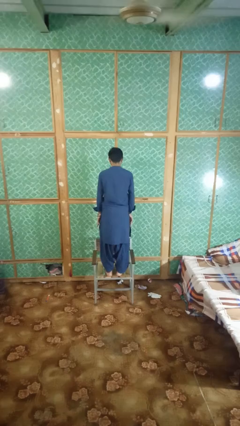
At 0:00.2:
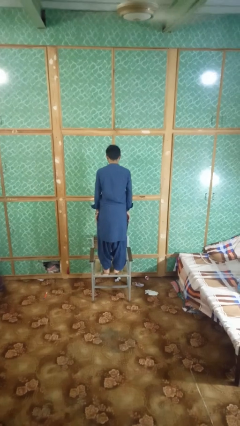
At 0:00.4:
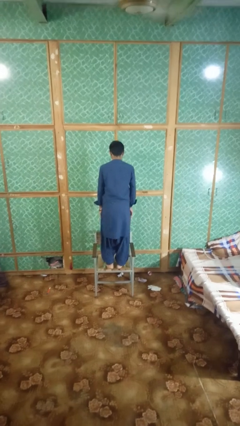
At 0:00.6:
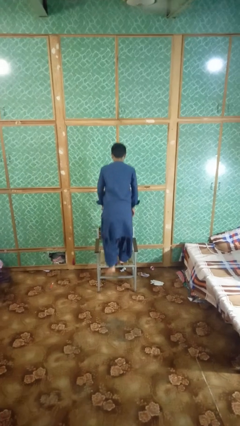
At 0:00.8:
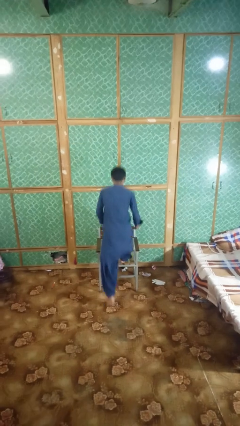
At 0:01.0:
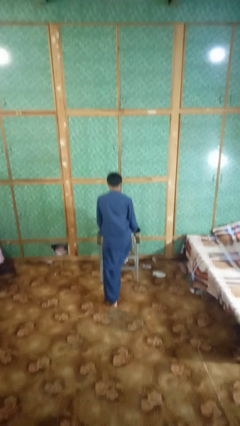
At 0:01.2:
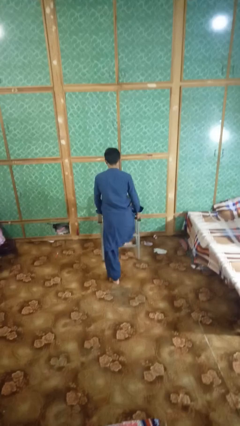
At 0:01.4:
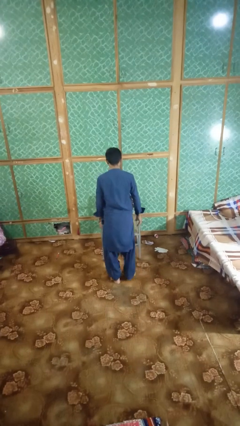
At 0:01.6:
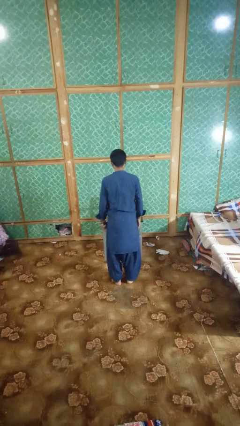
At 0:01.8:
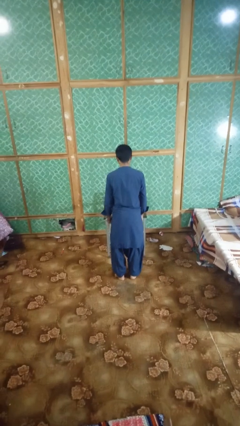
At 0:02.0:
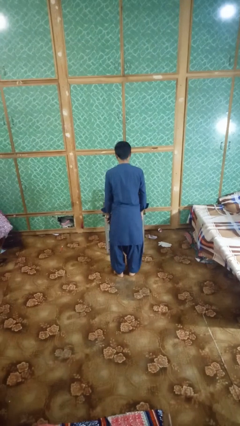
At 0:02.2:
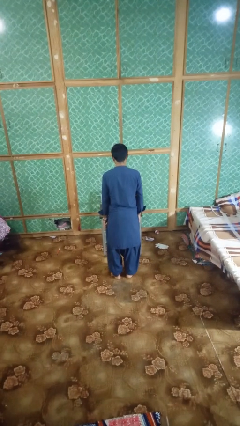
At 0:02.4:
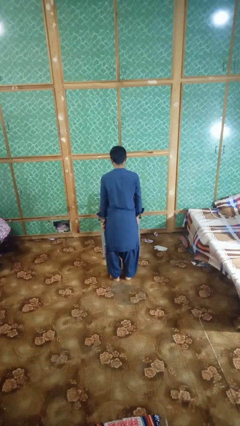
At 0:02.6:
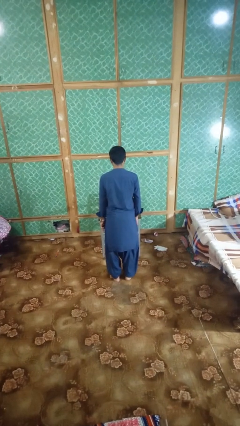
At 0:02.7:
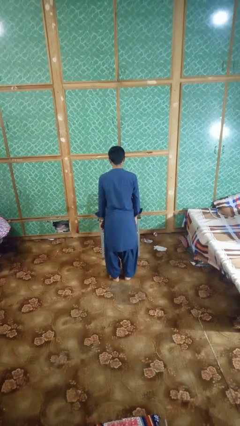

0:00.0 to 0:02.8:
person climbs off chair

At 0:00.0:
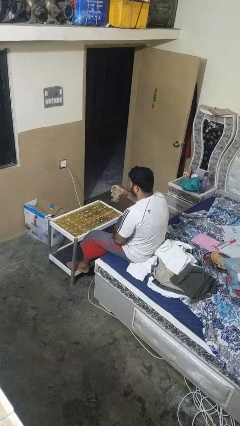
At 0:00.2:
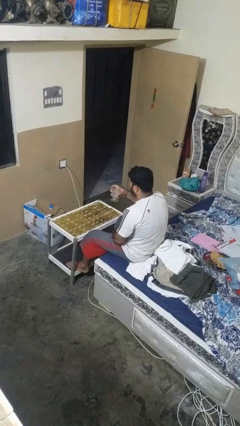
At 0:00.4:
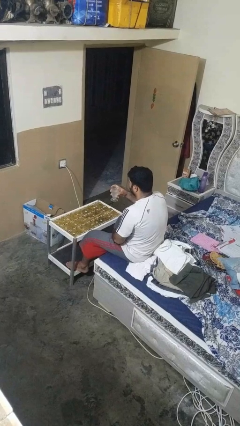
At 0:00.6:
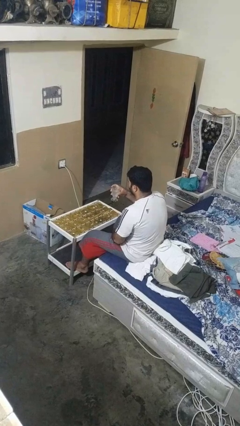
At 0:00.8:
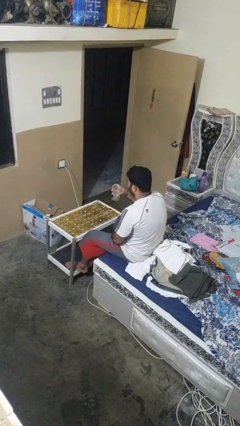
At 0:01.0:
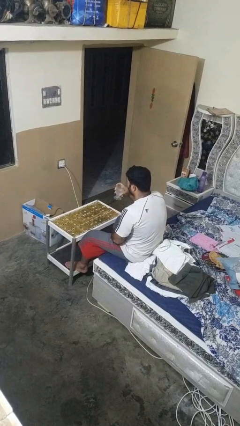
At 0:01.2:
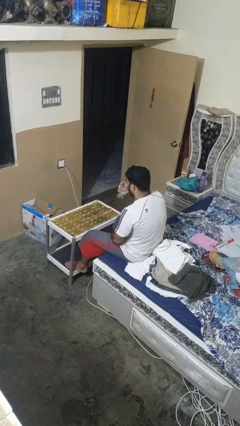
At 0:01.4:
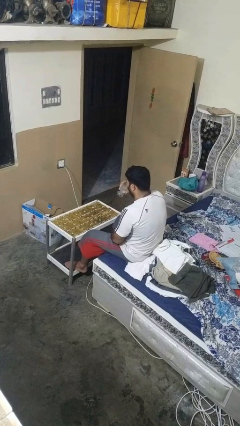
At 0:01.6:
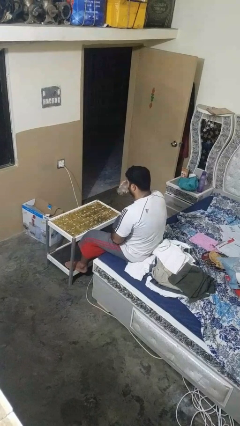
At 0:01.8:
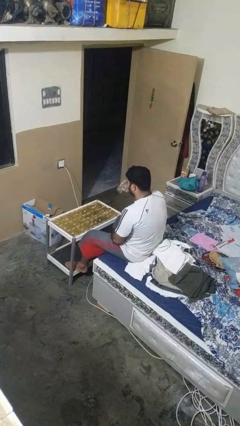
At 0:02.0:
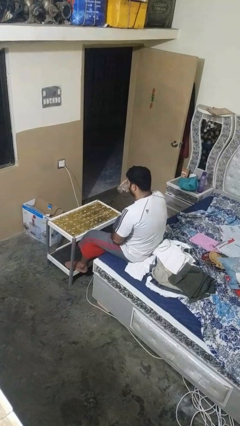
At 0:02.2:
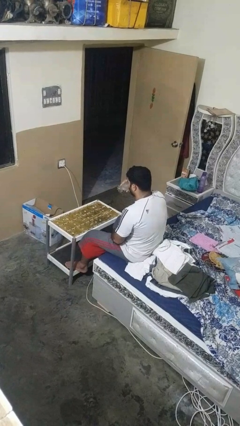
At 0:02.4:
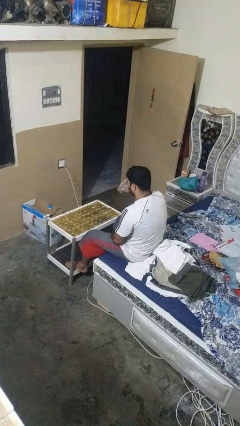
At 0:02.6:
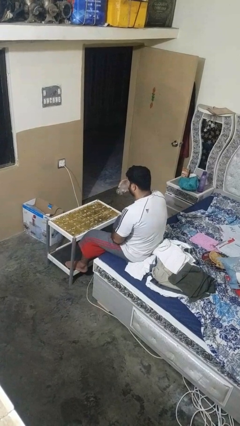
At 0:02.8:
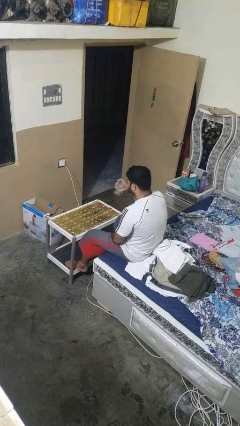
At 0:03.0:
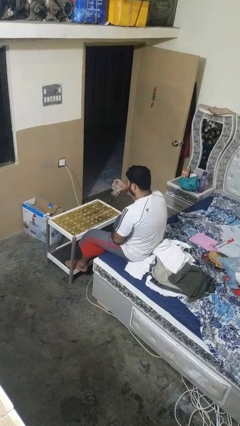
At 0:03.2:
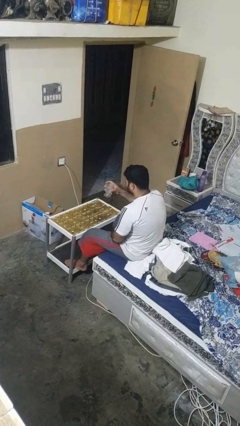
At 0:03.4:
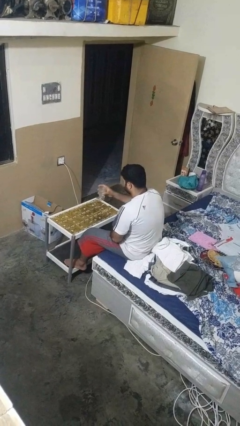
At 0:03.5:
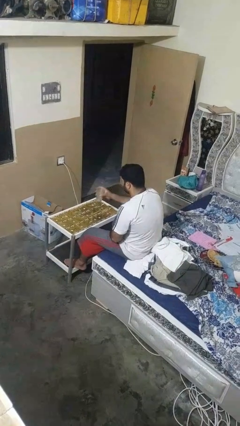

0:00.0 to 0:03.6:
person drinks from shotglass

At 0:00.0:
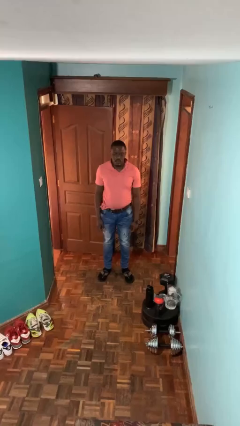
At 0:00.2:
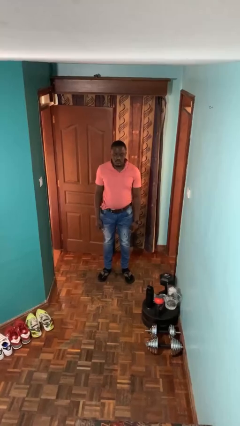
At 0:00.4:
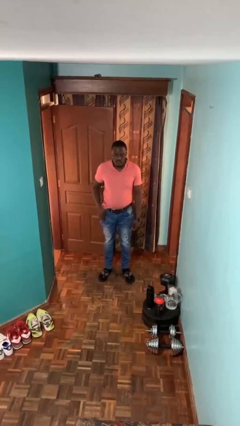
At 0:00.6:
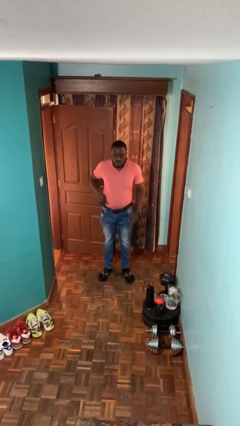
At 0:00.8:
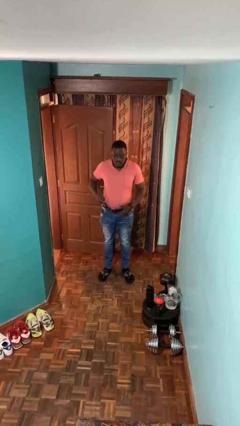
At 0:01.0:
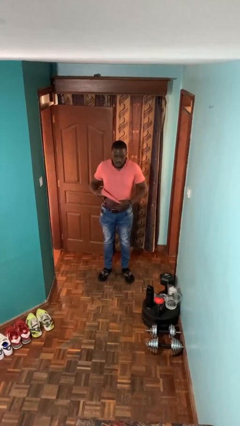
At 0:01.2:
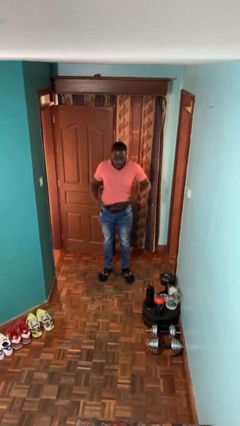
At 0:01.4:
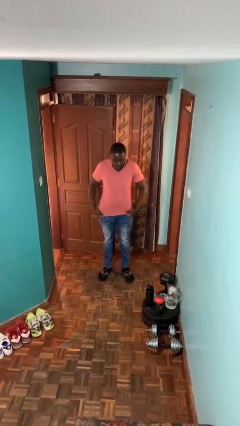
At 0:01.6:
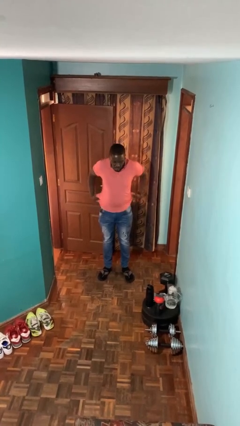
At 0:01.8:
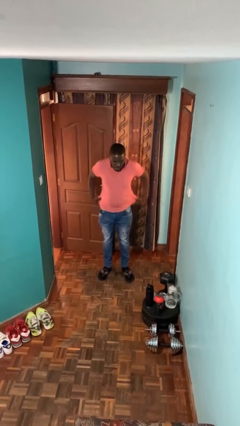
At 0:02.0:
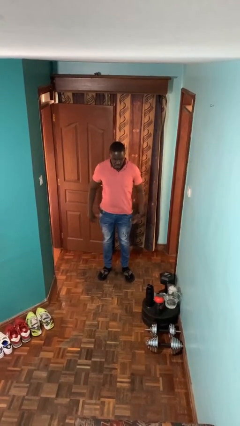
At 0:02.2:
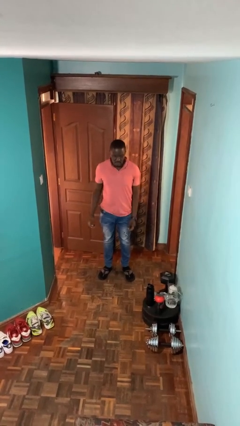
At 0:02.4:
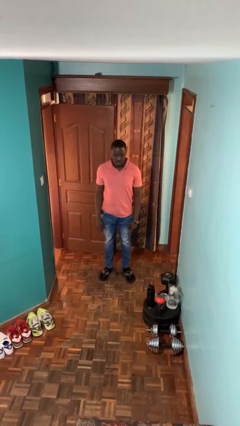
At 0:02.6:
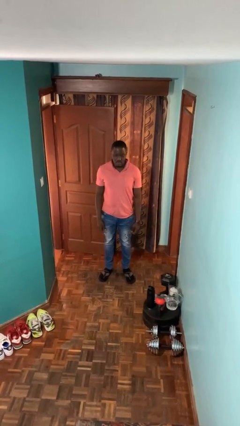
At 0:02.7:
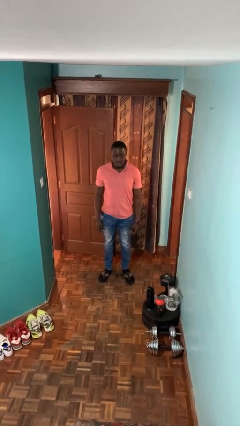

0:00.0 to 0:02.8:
person untucks shirt

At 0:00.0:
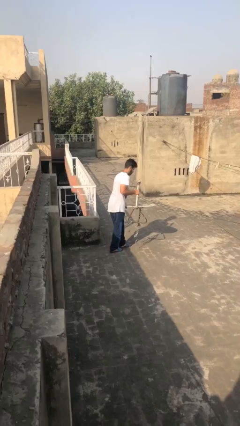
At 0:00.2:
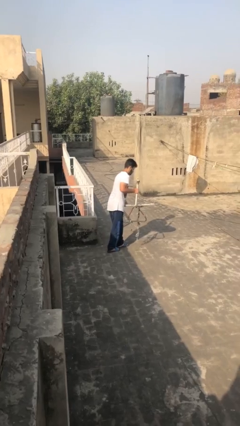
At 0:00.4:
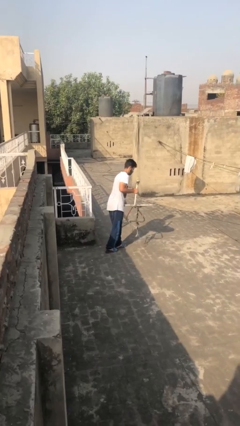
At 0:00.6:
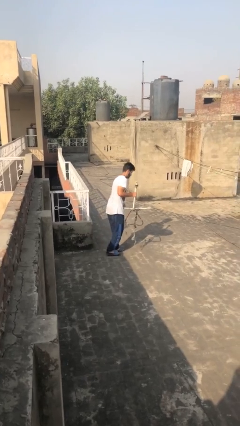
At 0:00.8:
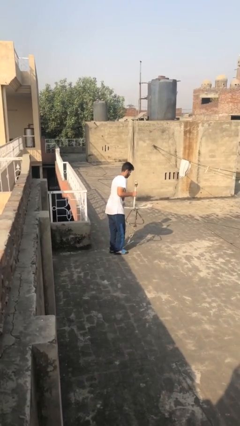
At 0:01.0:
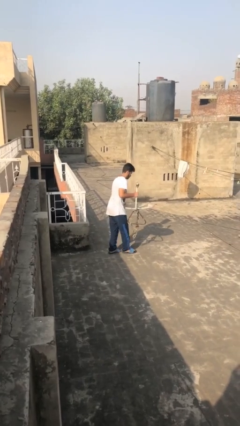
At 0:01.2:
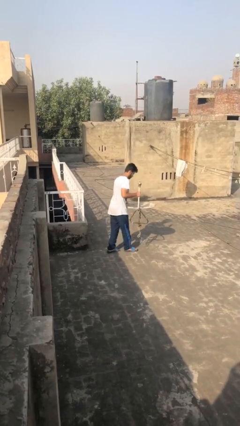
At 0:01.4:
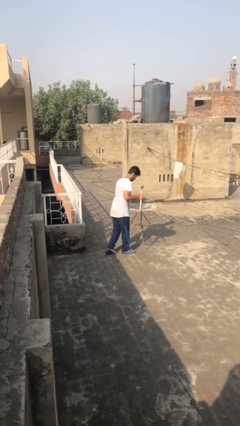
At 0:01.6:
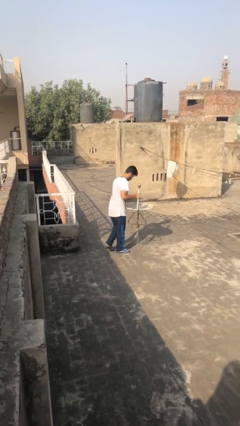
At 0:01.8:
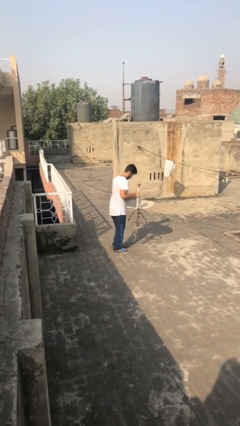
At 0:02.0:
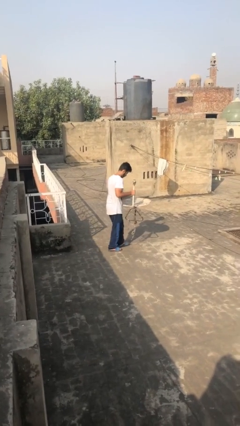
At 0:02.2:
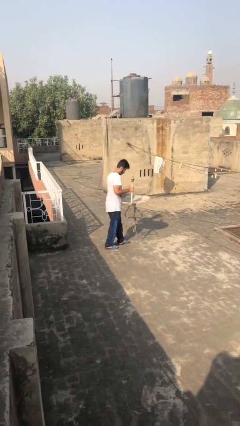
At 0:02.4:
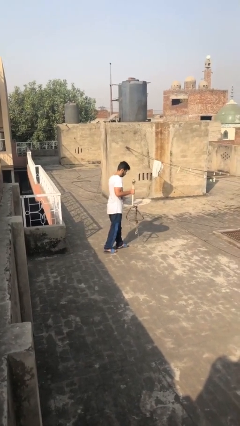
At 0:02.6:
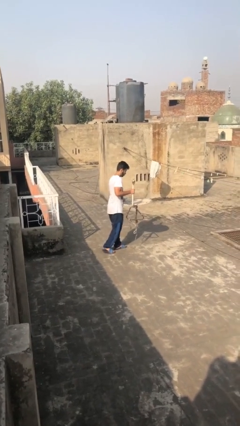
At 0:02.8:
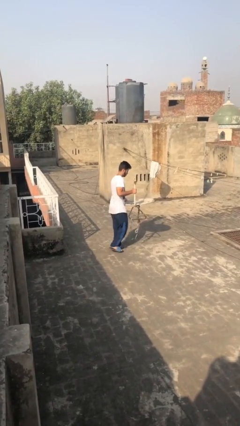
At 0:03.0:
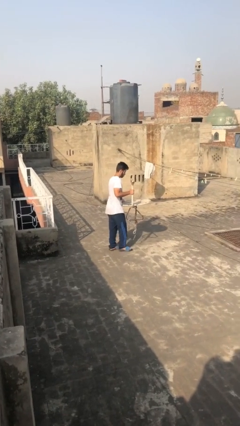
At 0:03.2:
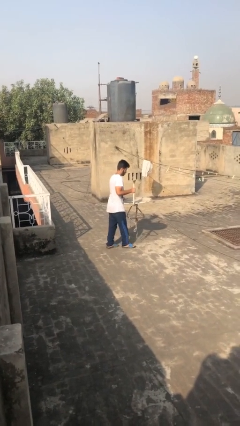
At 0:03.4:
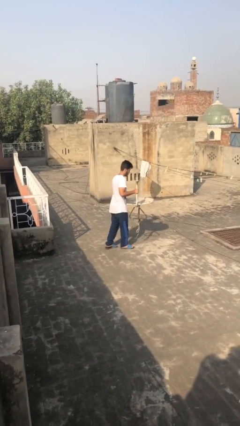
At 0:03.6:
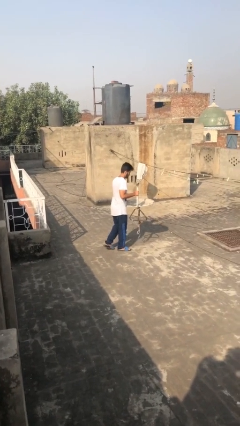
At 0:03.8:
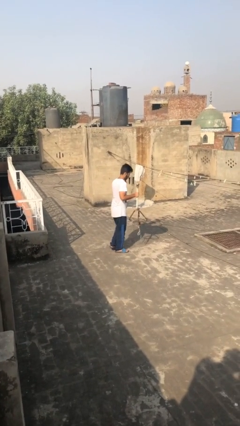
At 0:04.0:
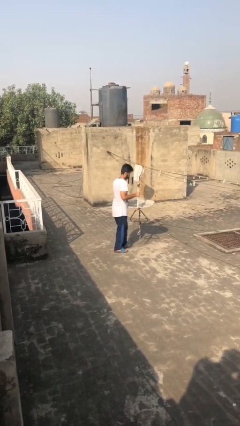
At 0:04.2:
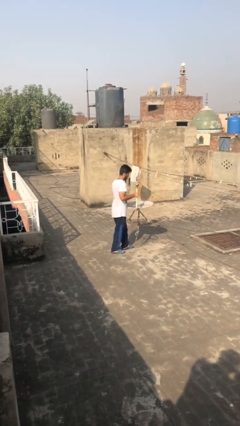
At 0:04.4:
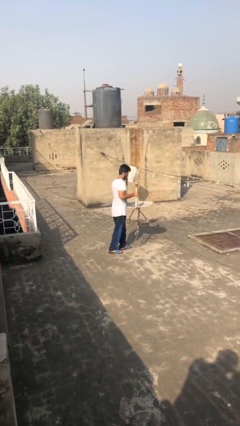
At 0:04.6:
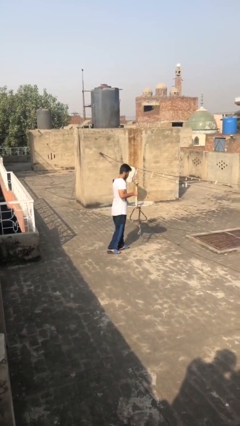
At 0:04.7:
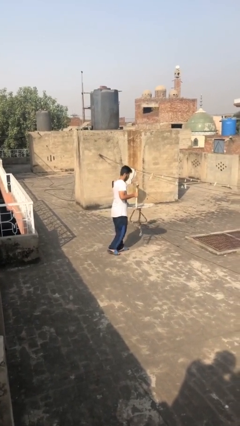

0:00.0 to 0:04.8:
person carries heavy object

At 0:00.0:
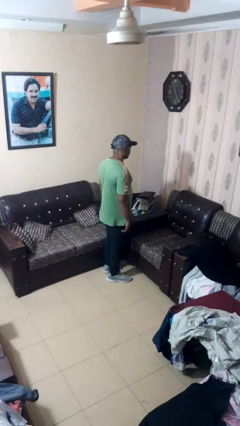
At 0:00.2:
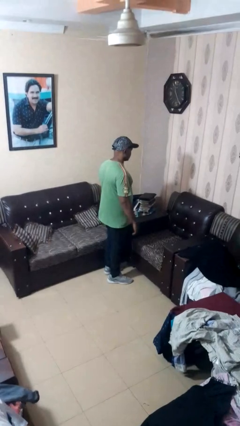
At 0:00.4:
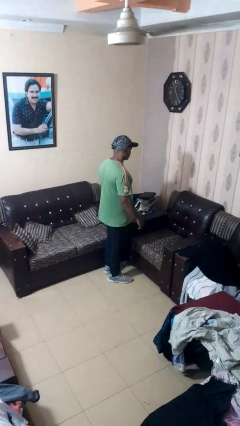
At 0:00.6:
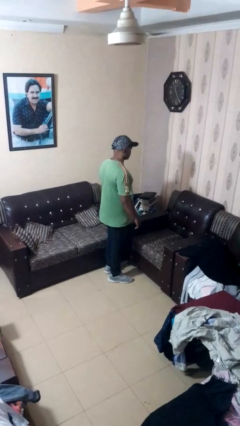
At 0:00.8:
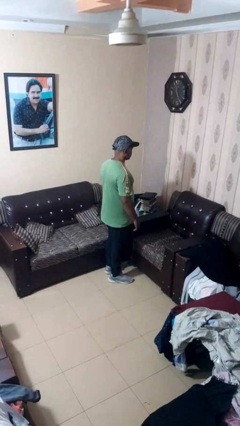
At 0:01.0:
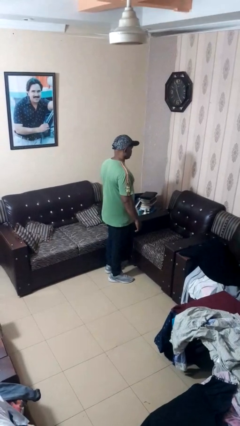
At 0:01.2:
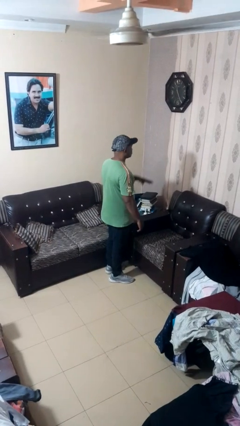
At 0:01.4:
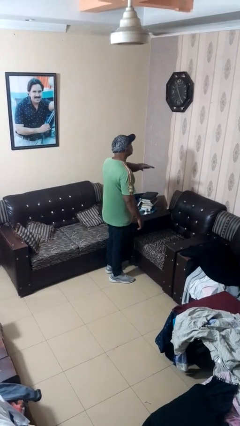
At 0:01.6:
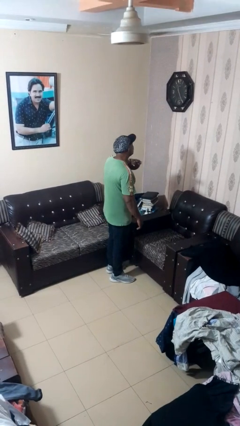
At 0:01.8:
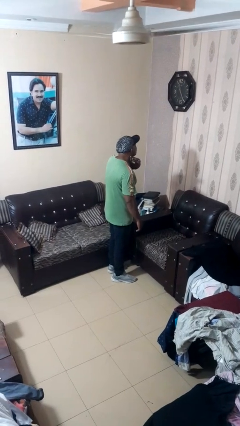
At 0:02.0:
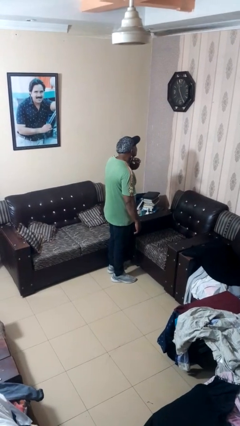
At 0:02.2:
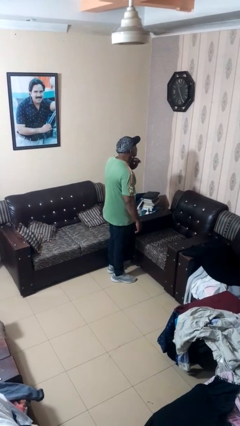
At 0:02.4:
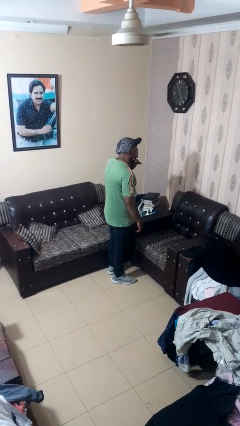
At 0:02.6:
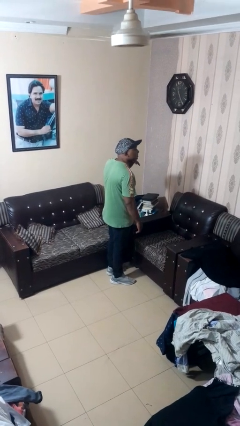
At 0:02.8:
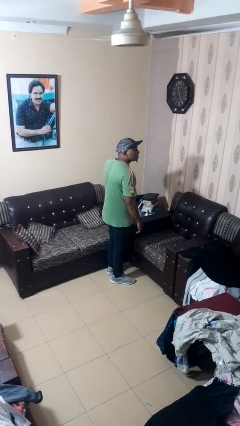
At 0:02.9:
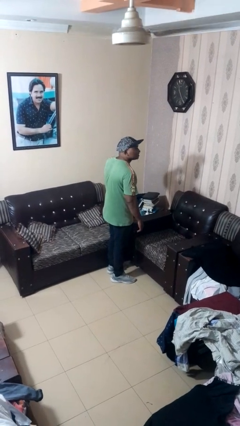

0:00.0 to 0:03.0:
person gestures cut

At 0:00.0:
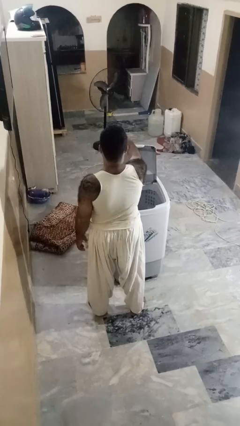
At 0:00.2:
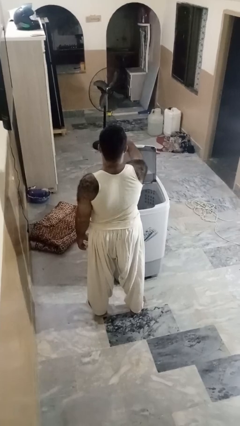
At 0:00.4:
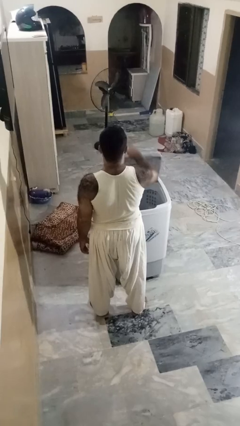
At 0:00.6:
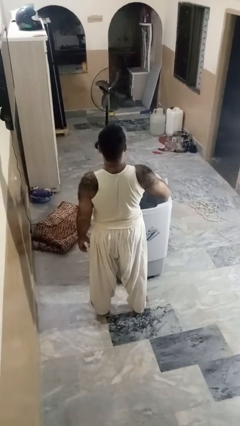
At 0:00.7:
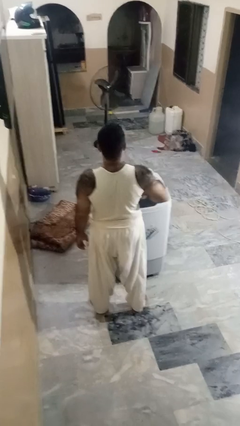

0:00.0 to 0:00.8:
person closes clothes washer
